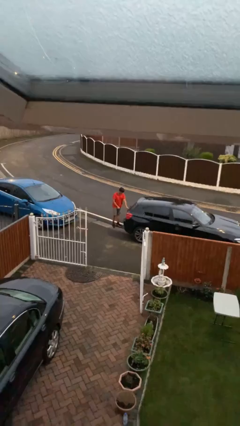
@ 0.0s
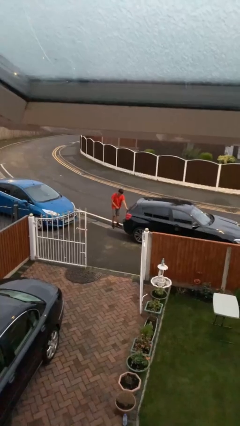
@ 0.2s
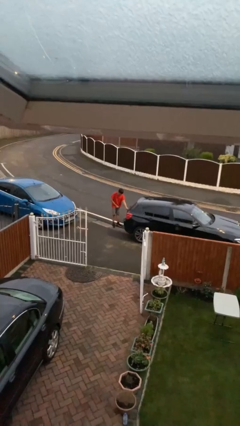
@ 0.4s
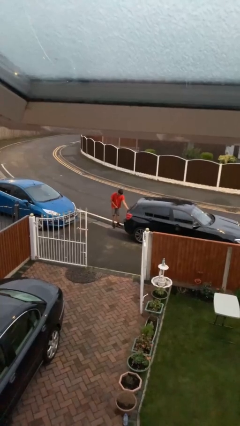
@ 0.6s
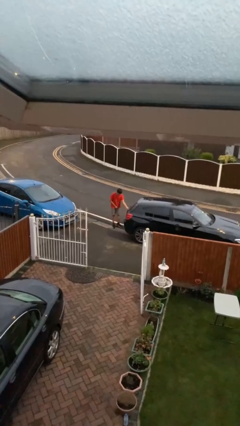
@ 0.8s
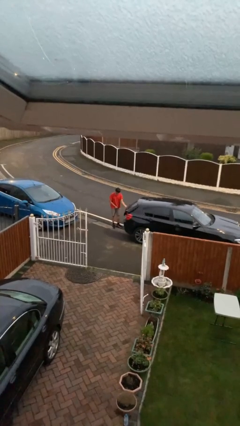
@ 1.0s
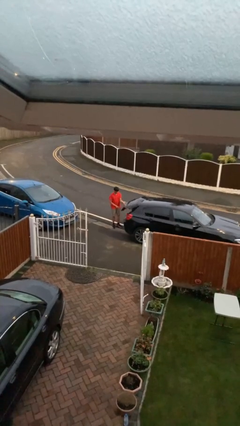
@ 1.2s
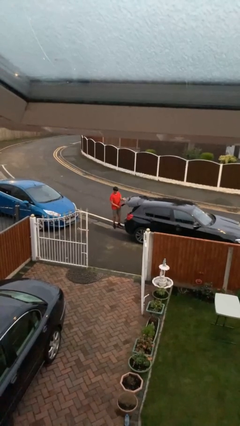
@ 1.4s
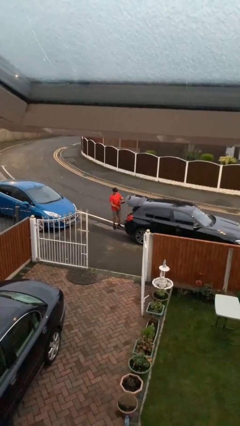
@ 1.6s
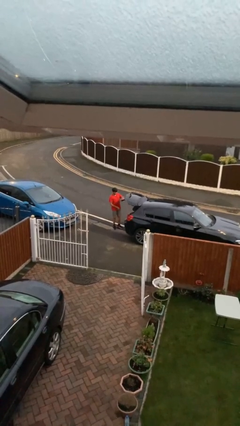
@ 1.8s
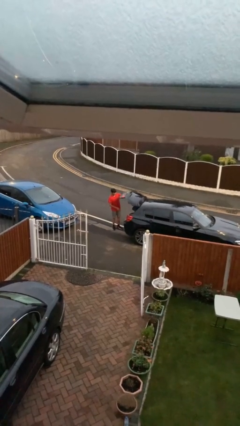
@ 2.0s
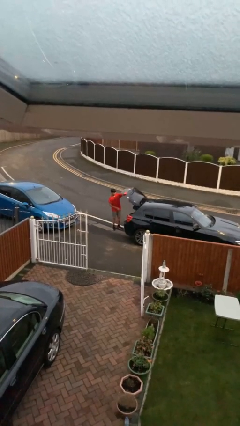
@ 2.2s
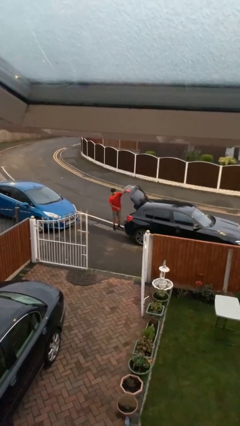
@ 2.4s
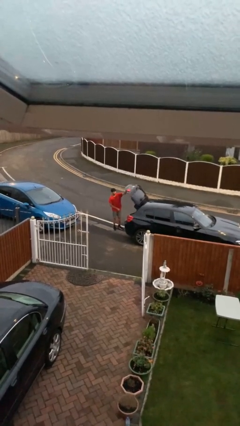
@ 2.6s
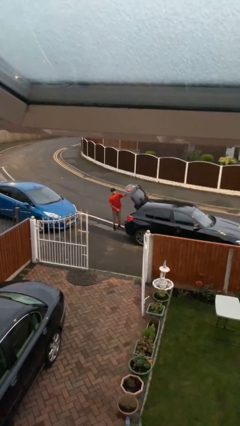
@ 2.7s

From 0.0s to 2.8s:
person opens car trunk

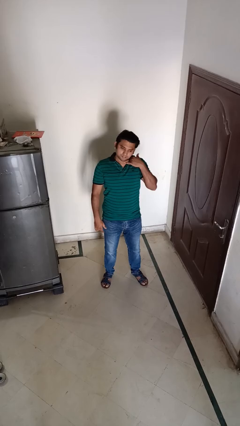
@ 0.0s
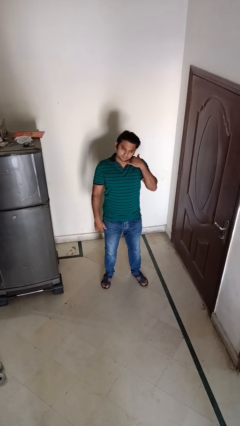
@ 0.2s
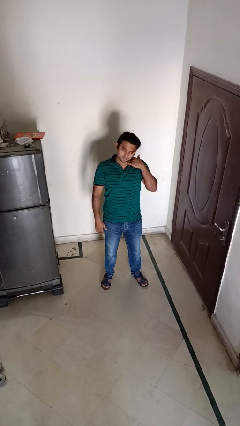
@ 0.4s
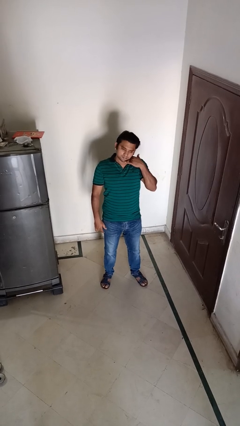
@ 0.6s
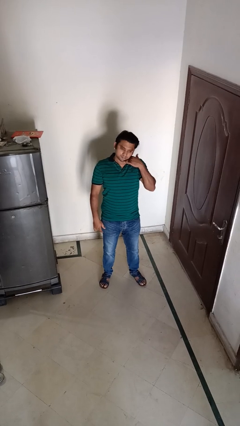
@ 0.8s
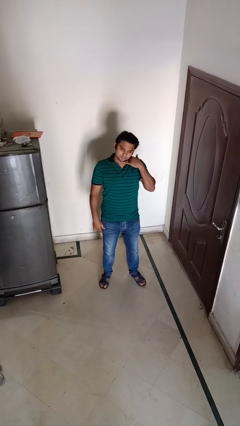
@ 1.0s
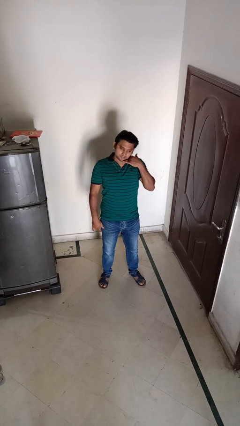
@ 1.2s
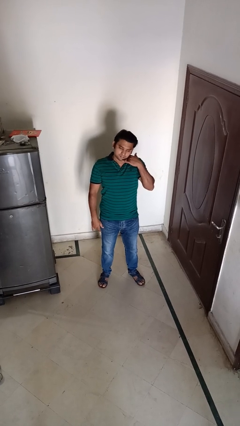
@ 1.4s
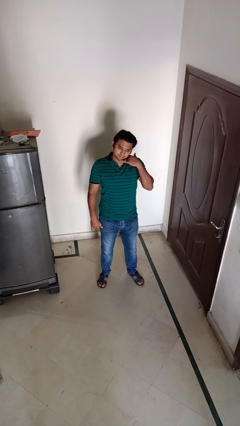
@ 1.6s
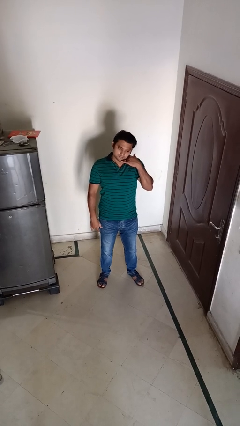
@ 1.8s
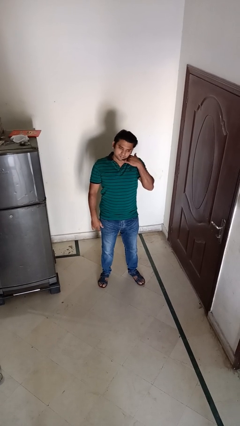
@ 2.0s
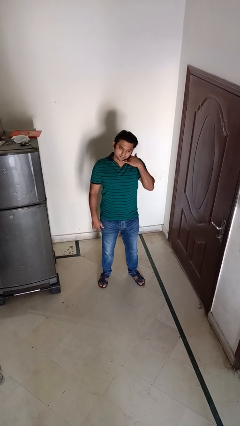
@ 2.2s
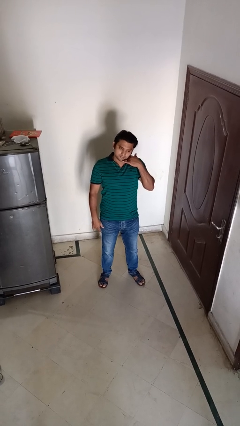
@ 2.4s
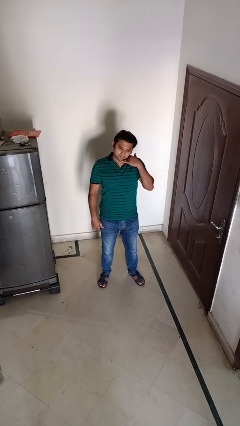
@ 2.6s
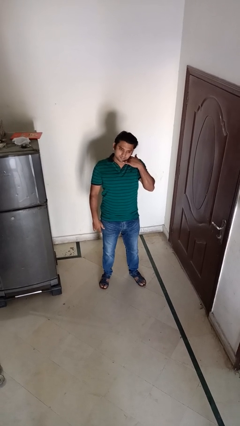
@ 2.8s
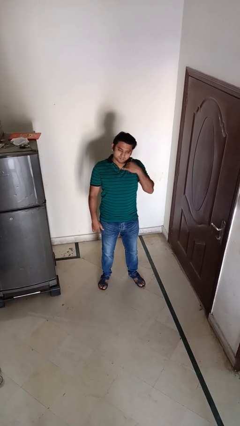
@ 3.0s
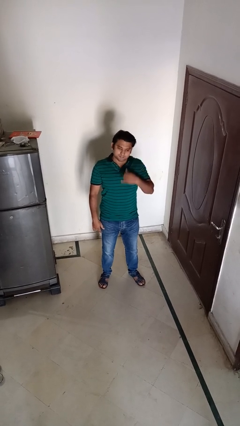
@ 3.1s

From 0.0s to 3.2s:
person gestures call me

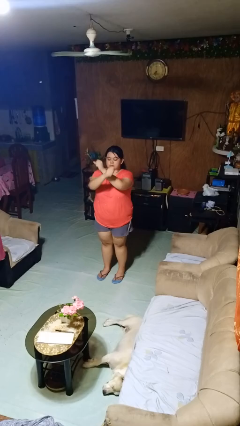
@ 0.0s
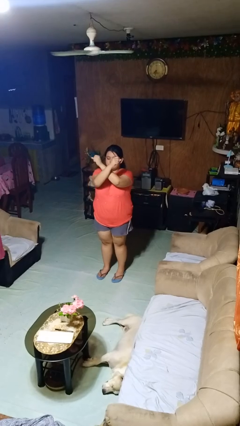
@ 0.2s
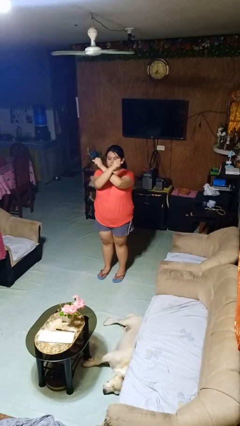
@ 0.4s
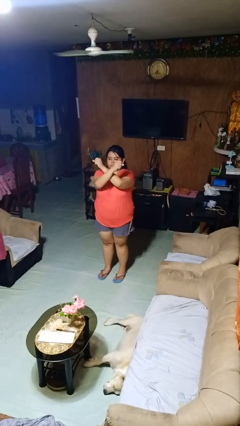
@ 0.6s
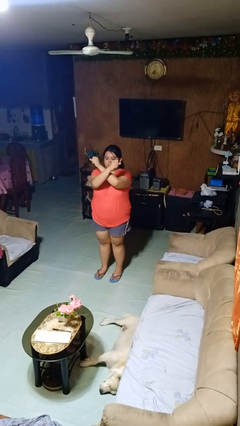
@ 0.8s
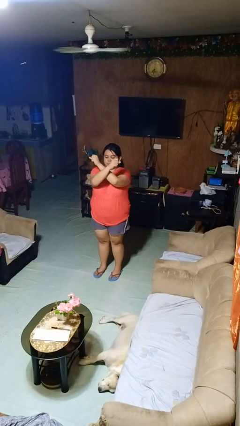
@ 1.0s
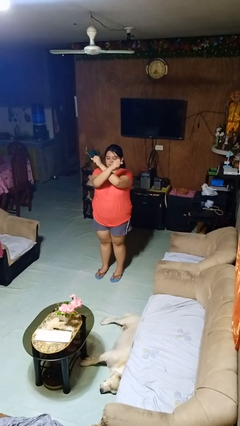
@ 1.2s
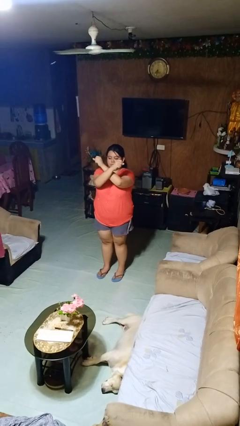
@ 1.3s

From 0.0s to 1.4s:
person gestures arms x

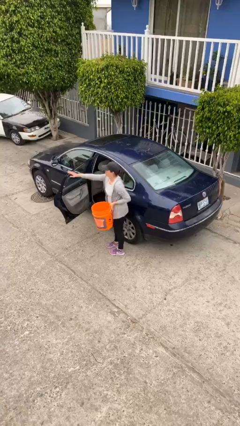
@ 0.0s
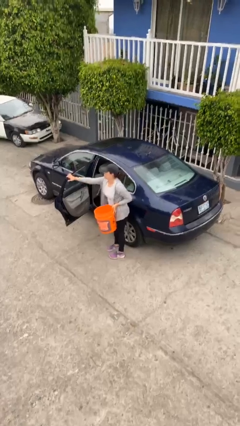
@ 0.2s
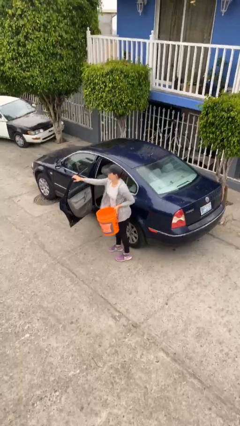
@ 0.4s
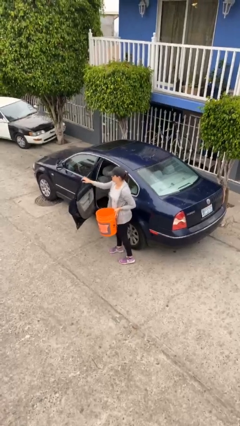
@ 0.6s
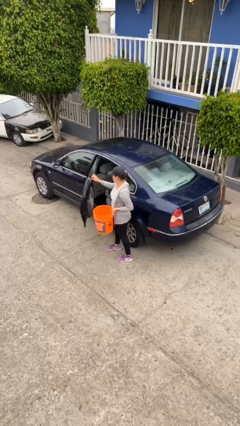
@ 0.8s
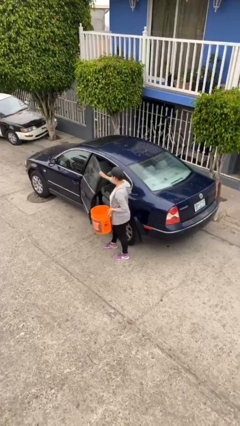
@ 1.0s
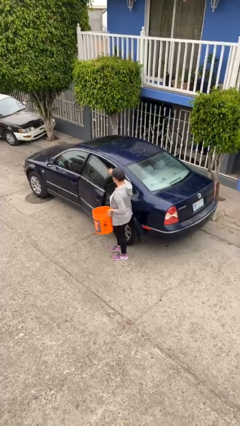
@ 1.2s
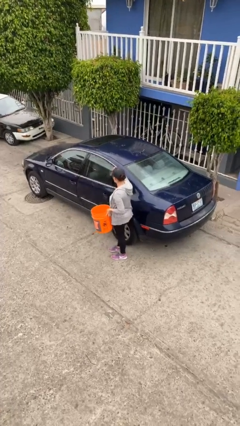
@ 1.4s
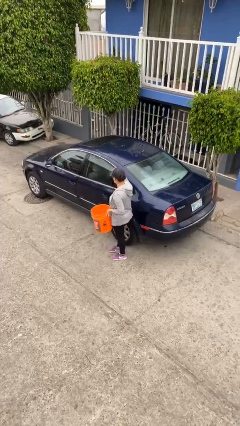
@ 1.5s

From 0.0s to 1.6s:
person closes car door

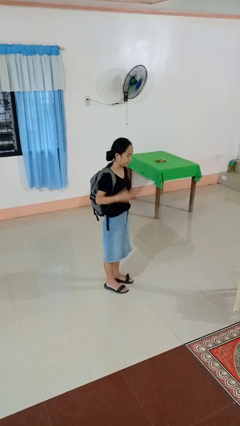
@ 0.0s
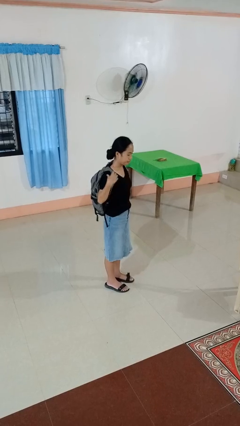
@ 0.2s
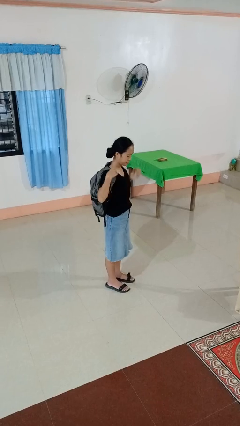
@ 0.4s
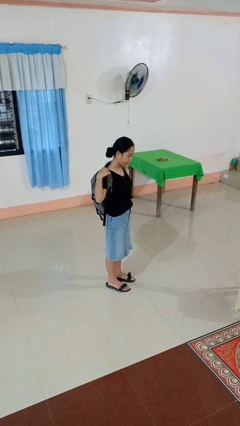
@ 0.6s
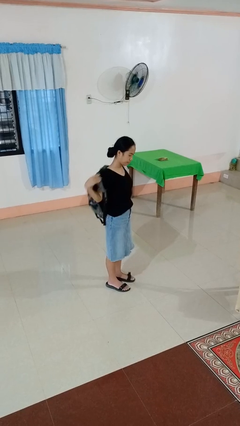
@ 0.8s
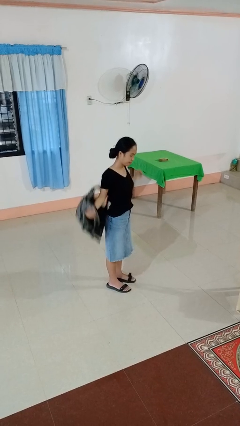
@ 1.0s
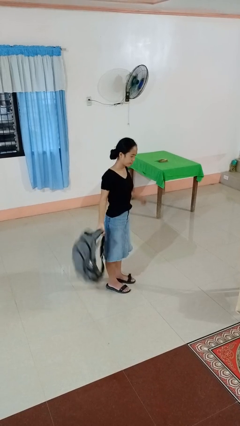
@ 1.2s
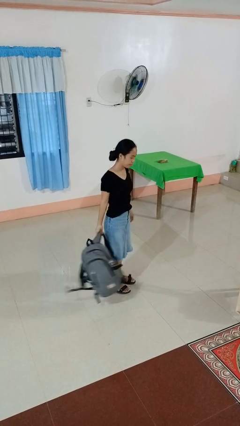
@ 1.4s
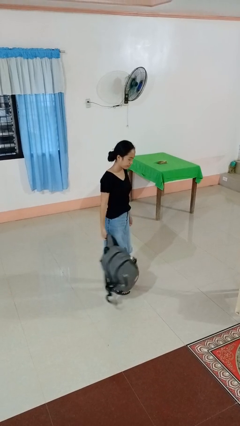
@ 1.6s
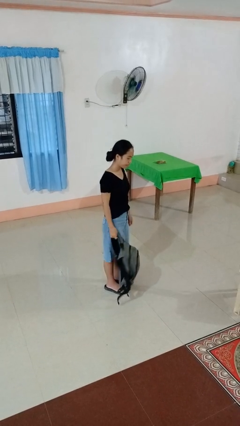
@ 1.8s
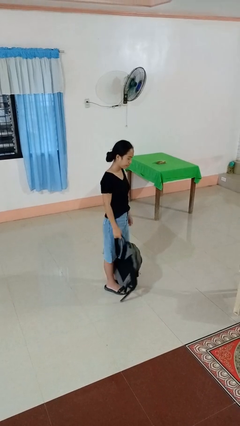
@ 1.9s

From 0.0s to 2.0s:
person takes off backpack

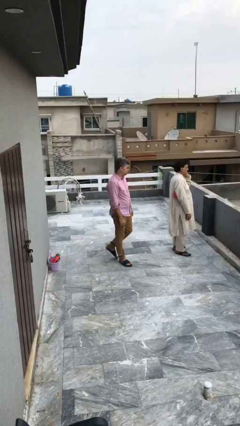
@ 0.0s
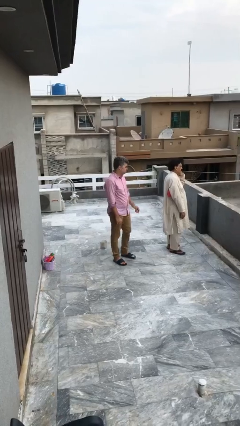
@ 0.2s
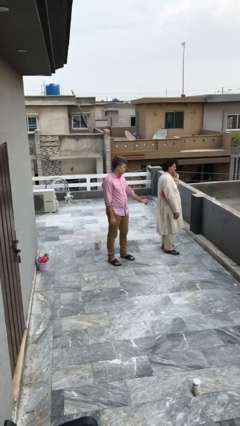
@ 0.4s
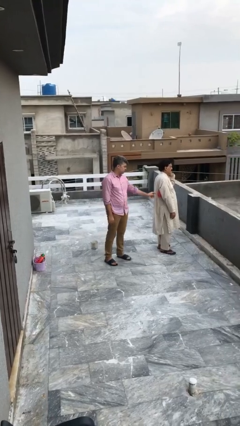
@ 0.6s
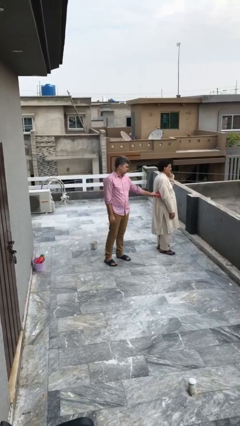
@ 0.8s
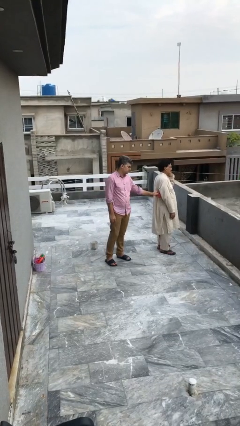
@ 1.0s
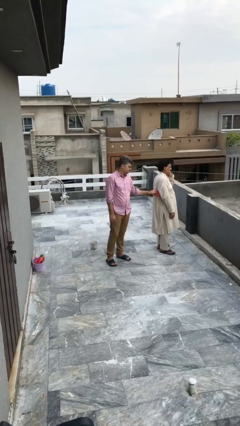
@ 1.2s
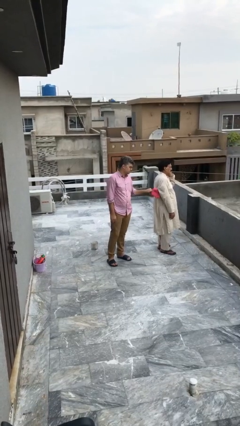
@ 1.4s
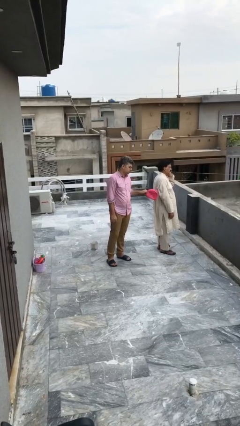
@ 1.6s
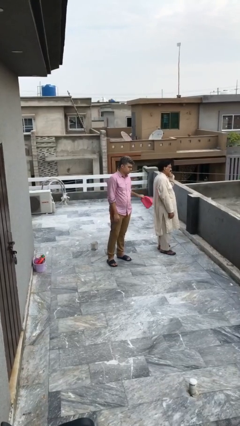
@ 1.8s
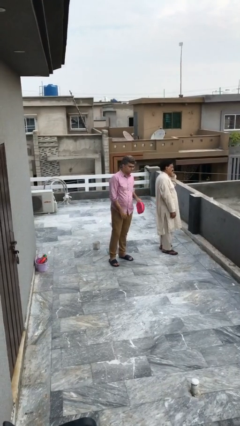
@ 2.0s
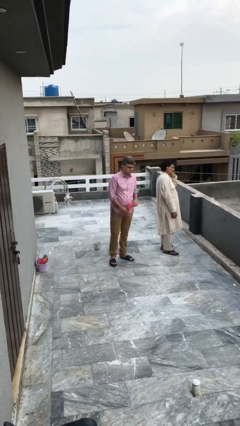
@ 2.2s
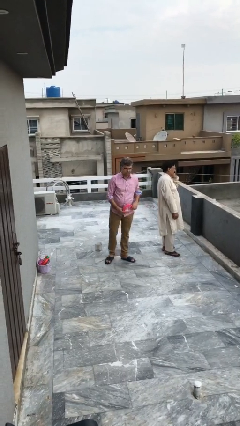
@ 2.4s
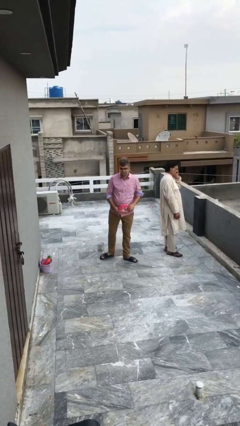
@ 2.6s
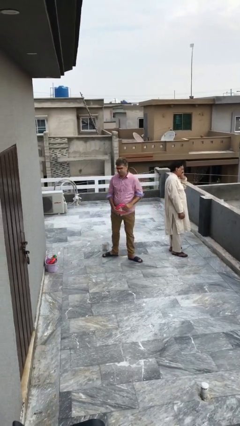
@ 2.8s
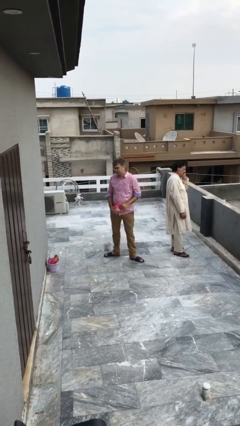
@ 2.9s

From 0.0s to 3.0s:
person steals object from person

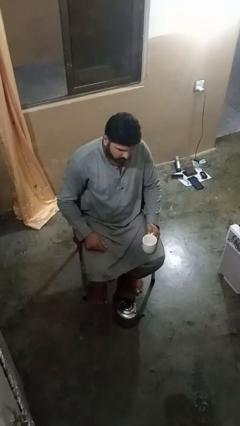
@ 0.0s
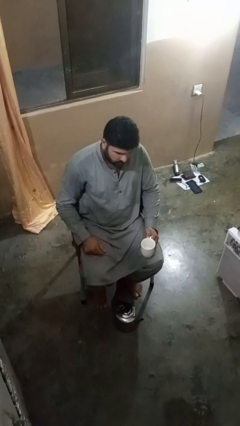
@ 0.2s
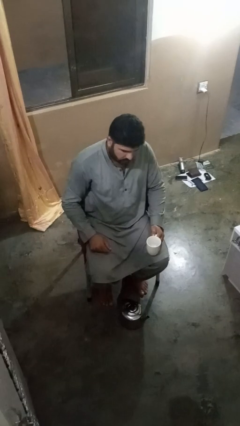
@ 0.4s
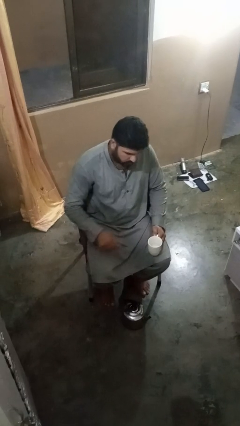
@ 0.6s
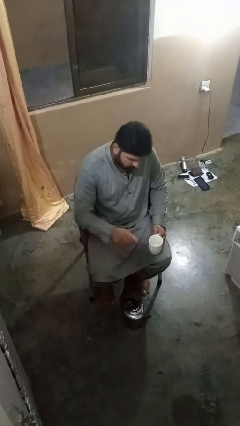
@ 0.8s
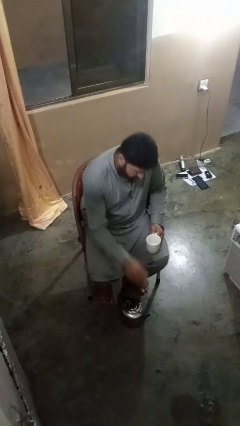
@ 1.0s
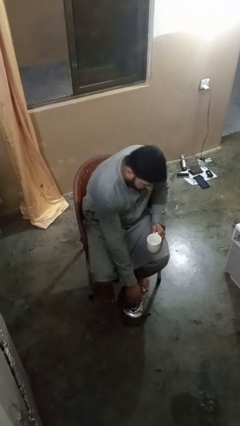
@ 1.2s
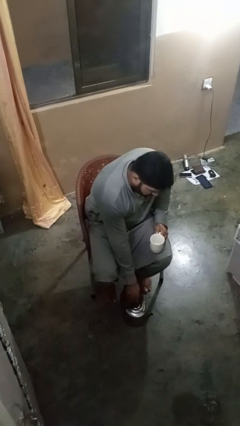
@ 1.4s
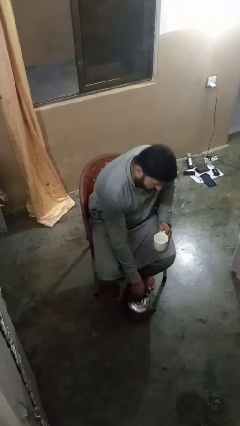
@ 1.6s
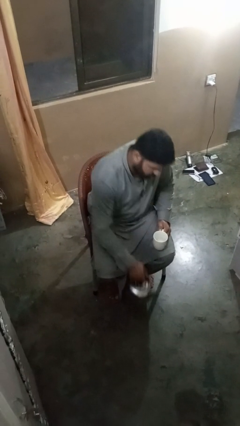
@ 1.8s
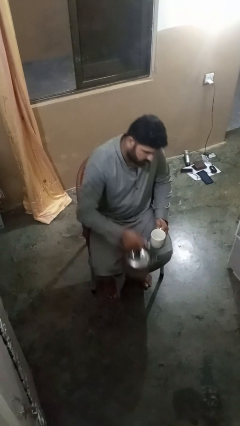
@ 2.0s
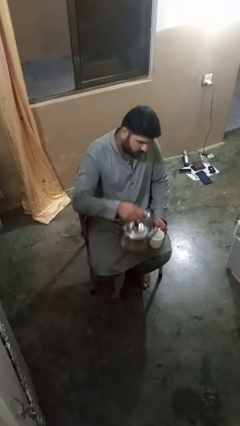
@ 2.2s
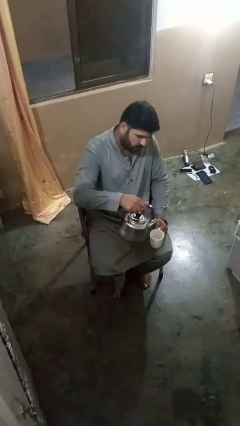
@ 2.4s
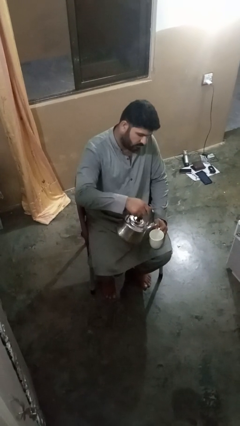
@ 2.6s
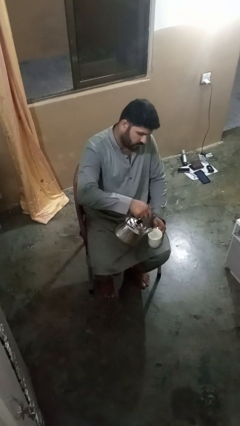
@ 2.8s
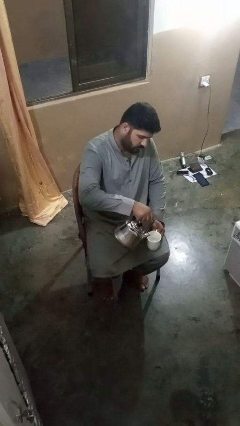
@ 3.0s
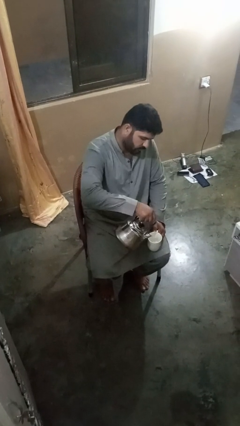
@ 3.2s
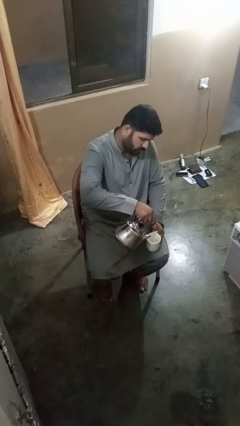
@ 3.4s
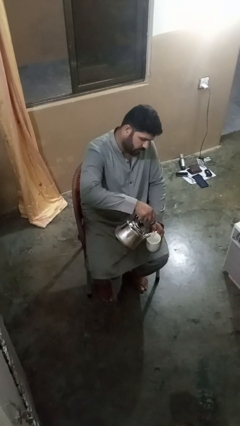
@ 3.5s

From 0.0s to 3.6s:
person pours coffee into mug
